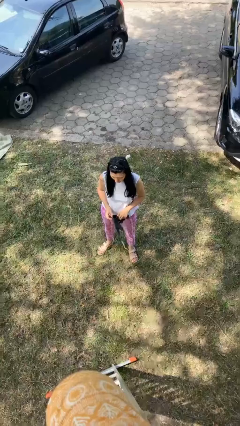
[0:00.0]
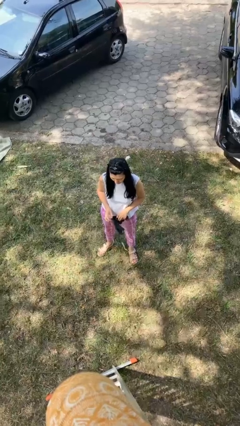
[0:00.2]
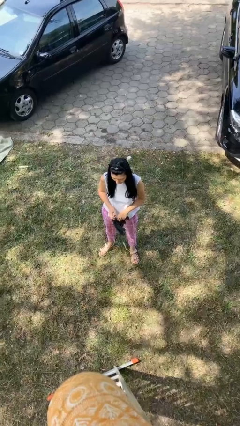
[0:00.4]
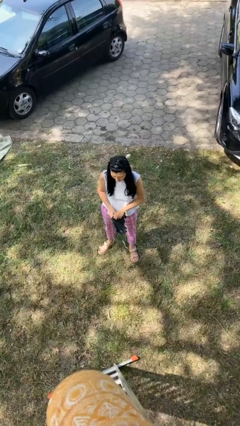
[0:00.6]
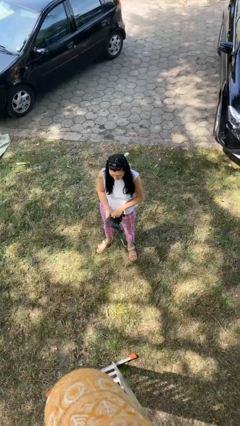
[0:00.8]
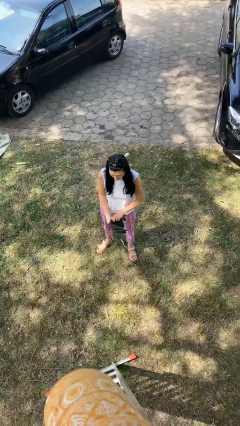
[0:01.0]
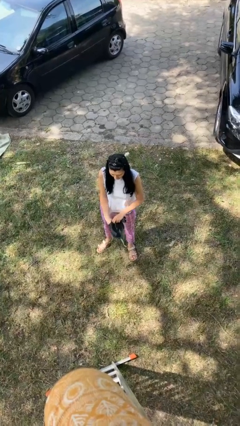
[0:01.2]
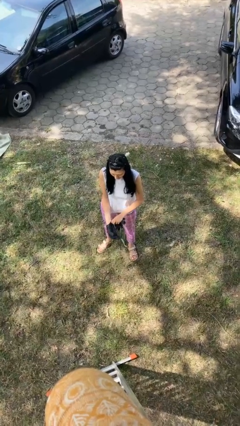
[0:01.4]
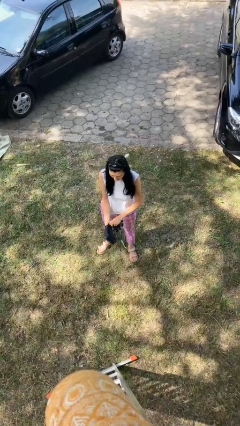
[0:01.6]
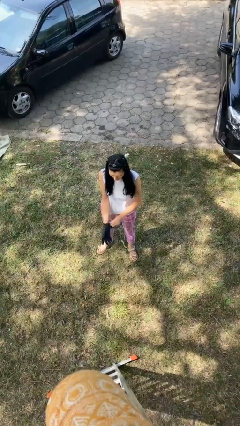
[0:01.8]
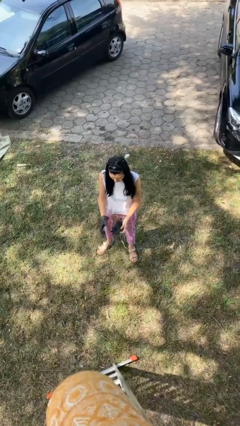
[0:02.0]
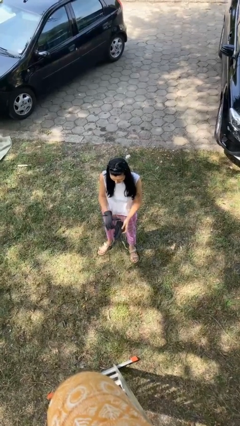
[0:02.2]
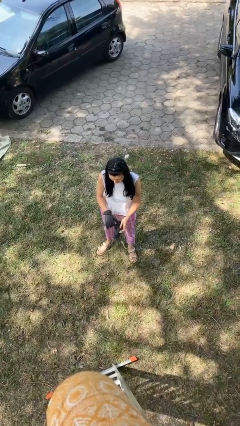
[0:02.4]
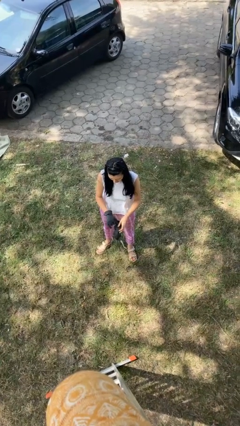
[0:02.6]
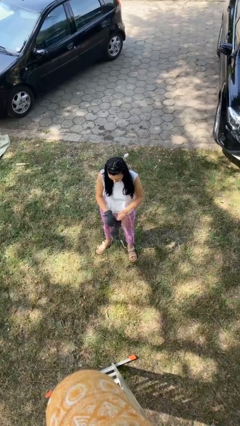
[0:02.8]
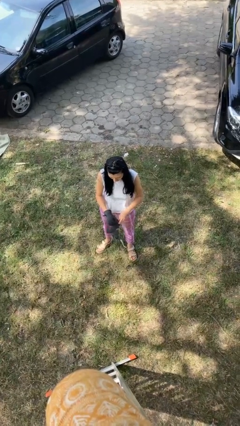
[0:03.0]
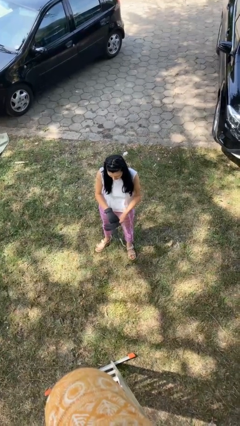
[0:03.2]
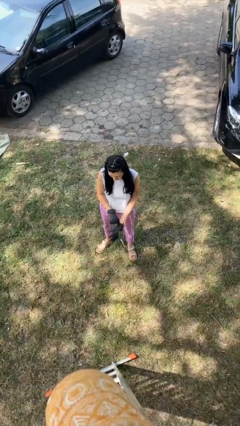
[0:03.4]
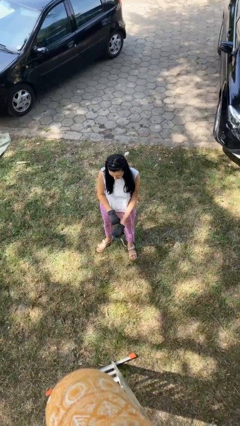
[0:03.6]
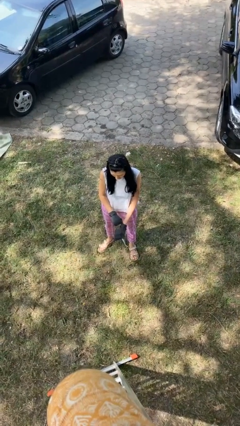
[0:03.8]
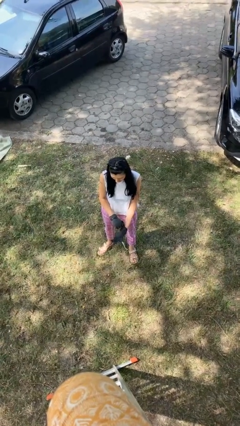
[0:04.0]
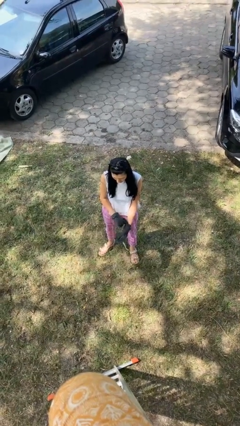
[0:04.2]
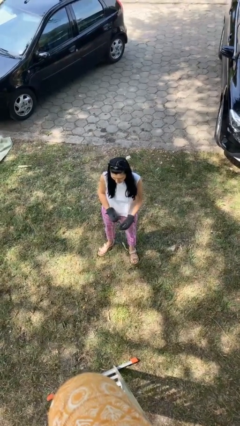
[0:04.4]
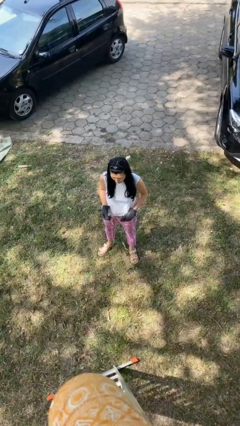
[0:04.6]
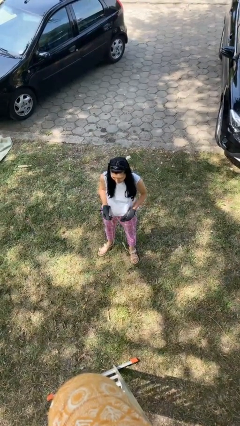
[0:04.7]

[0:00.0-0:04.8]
person puts on gloves

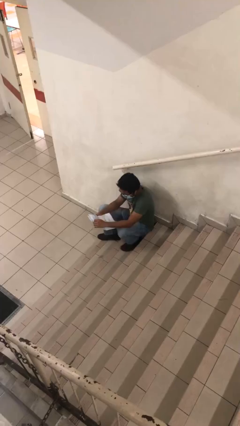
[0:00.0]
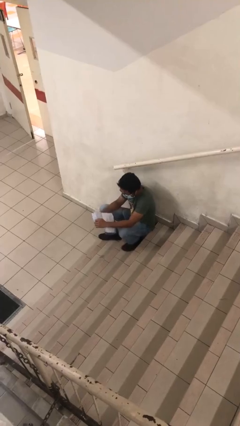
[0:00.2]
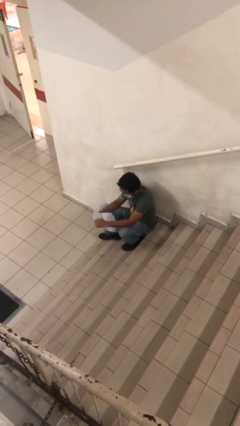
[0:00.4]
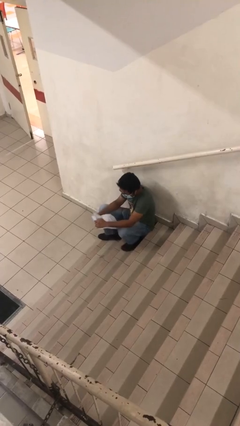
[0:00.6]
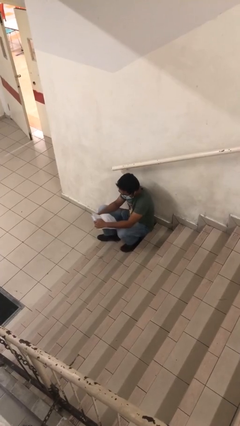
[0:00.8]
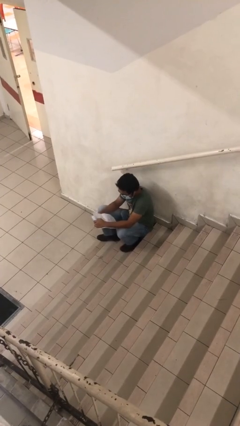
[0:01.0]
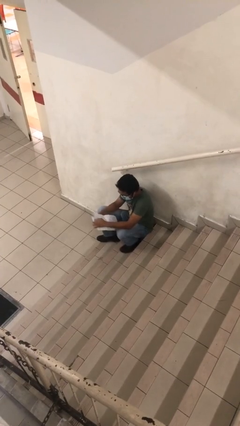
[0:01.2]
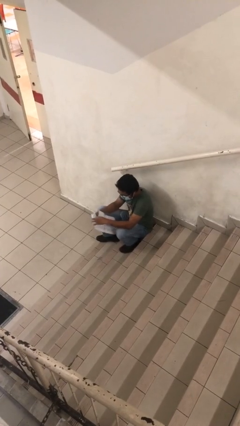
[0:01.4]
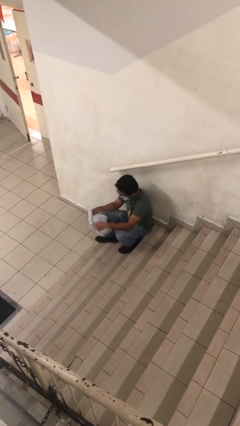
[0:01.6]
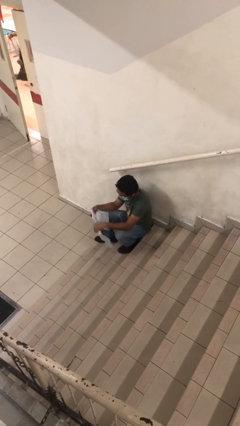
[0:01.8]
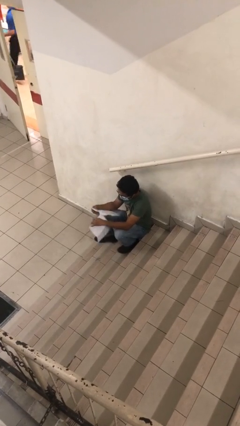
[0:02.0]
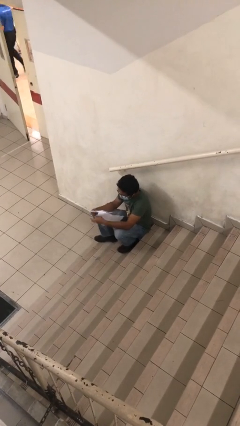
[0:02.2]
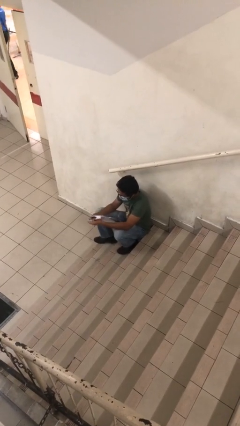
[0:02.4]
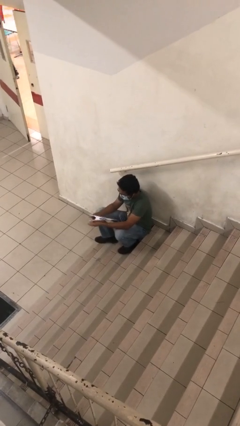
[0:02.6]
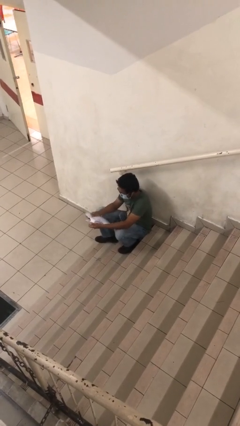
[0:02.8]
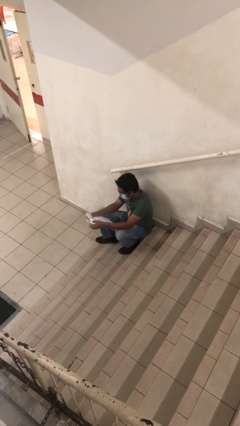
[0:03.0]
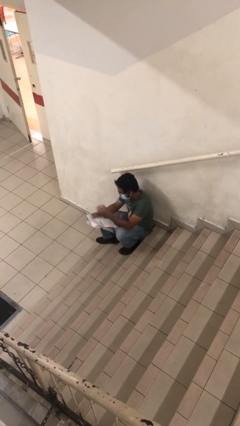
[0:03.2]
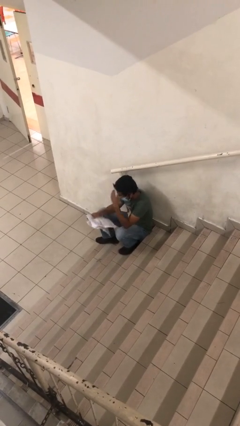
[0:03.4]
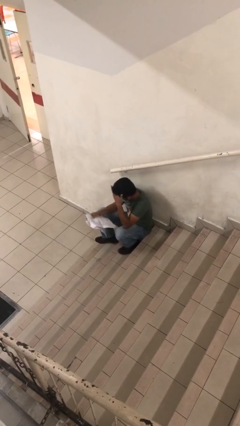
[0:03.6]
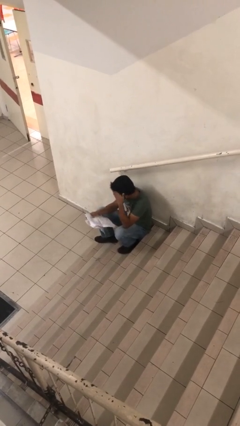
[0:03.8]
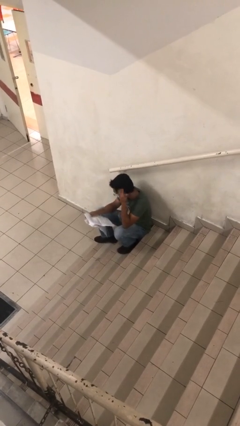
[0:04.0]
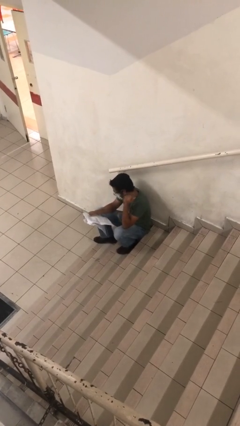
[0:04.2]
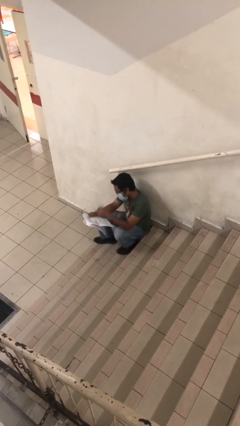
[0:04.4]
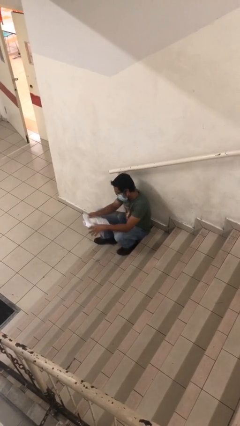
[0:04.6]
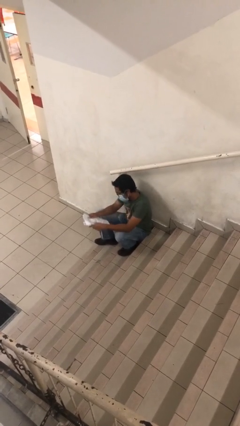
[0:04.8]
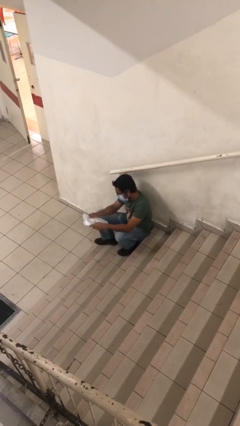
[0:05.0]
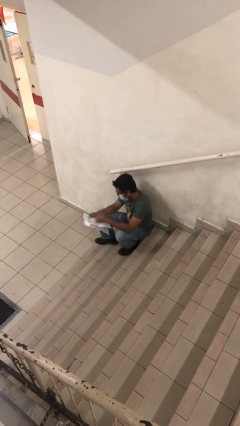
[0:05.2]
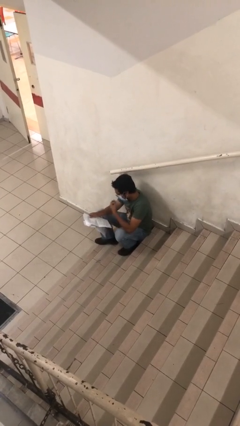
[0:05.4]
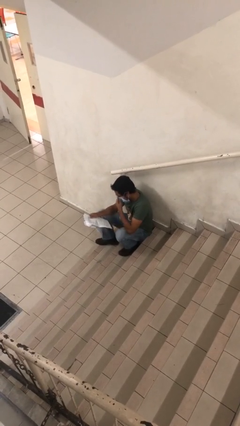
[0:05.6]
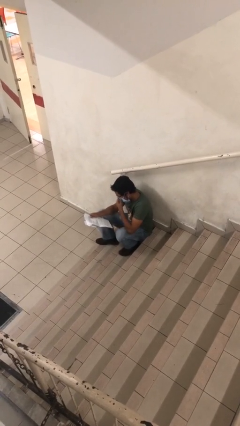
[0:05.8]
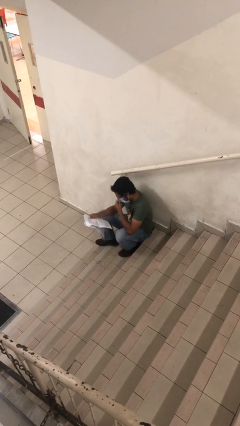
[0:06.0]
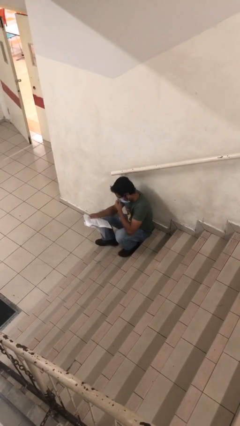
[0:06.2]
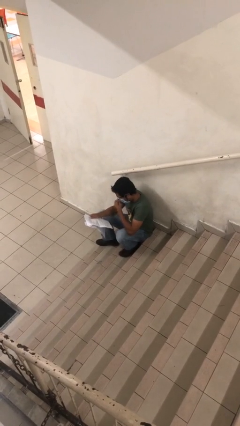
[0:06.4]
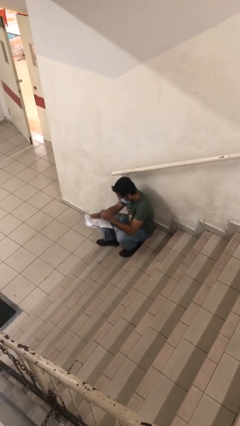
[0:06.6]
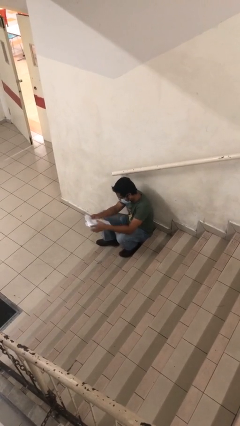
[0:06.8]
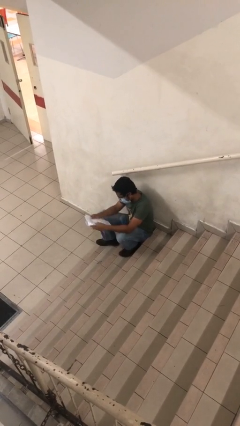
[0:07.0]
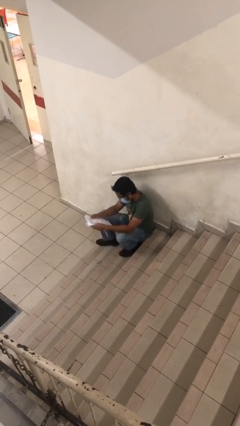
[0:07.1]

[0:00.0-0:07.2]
person reads document

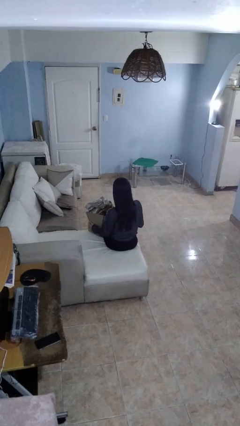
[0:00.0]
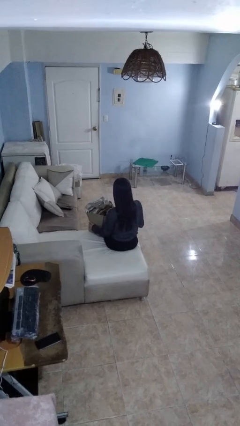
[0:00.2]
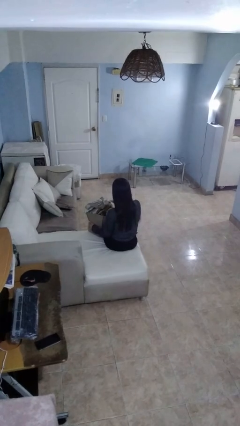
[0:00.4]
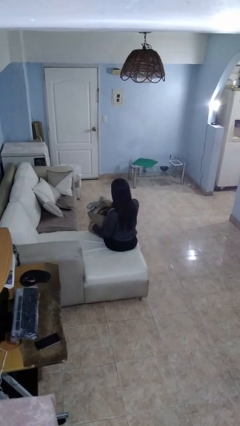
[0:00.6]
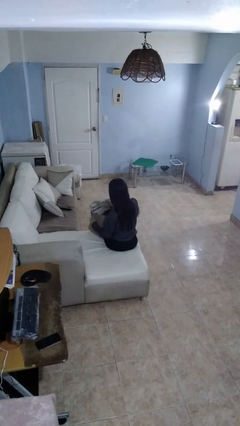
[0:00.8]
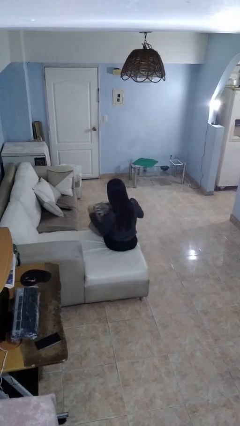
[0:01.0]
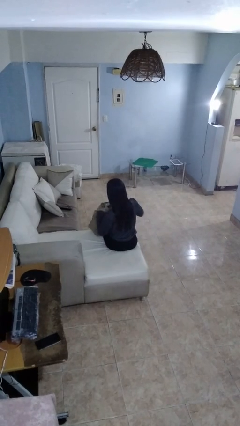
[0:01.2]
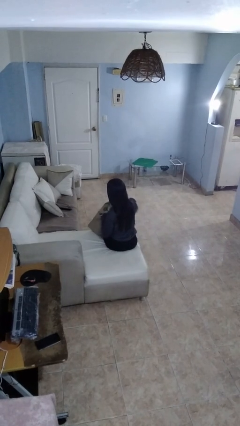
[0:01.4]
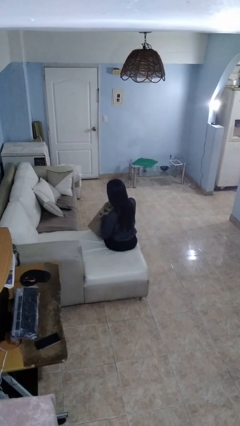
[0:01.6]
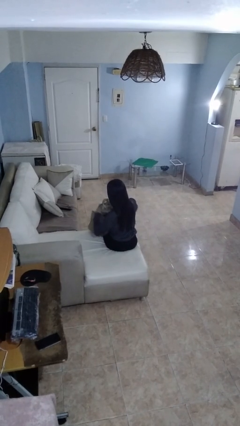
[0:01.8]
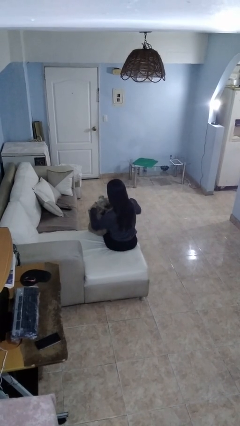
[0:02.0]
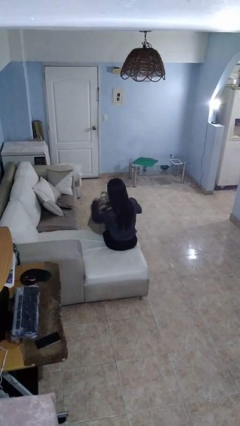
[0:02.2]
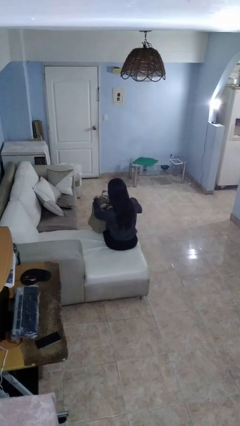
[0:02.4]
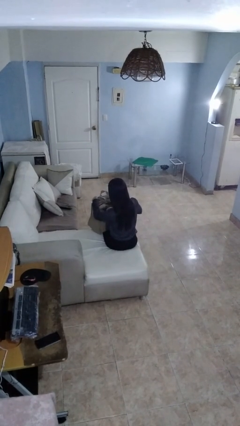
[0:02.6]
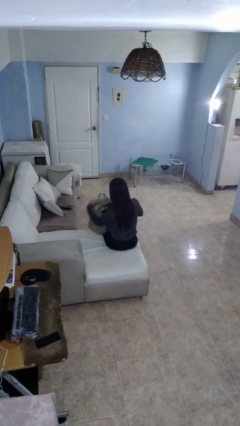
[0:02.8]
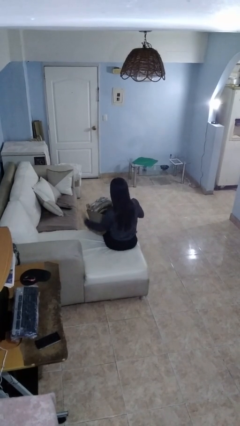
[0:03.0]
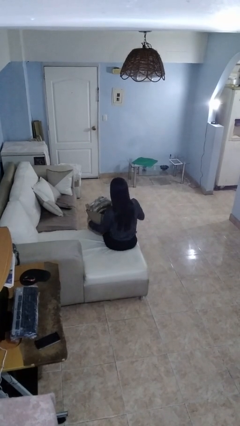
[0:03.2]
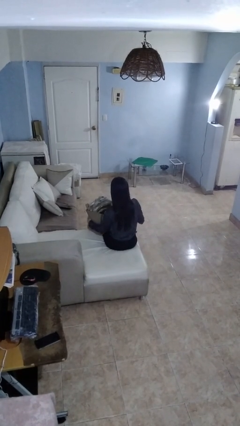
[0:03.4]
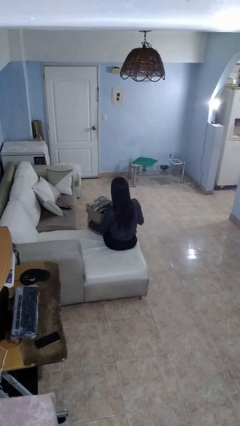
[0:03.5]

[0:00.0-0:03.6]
person searches in bag

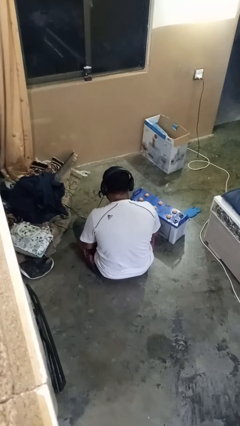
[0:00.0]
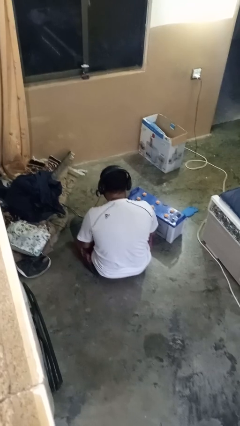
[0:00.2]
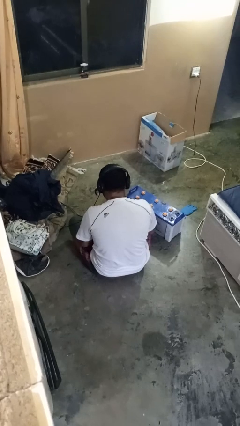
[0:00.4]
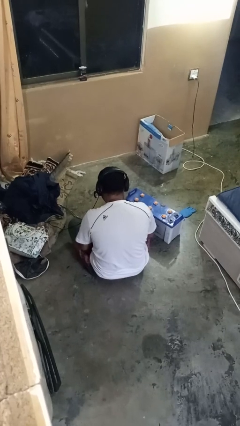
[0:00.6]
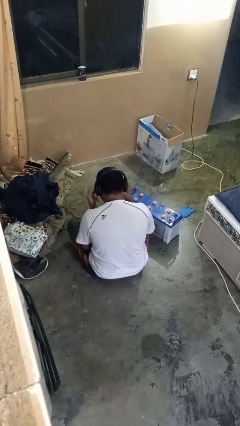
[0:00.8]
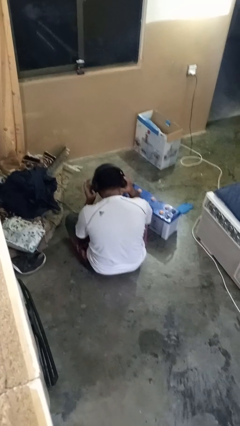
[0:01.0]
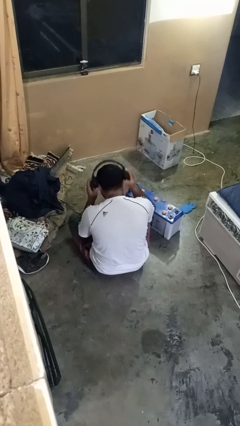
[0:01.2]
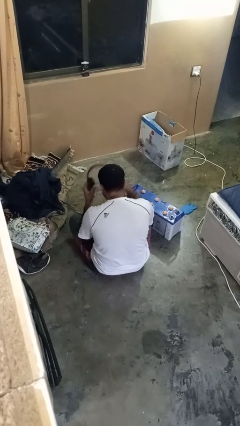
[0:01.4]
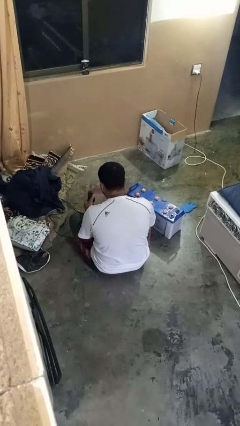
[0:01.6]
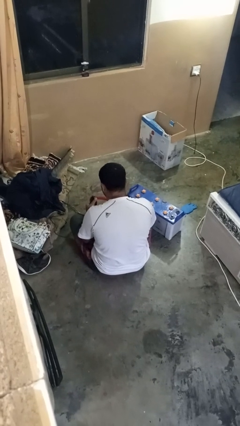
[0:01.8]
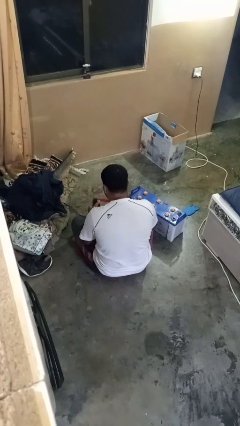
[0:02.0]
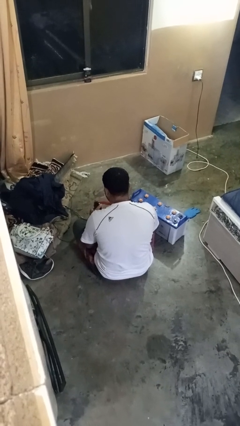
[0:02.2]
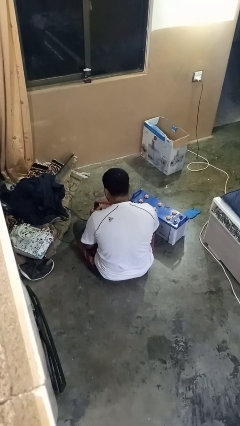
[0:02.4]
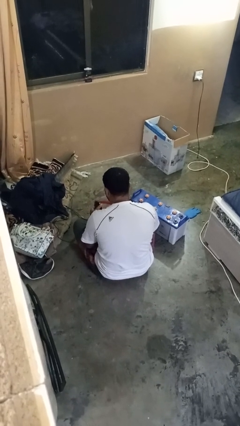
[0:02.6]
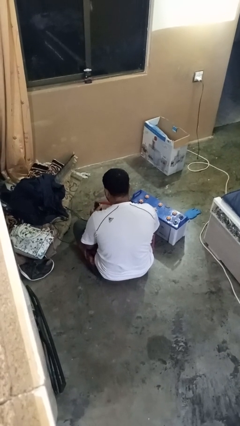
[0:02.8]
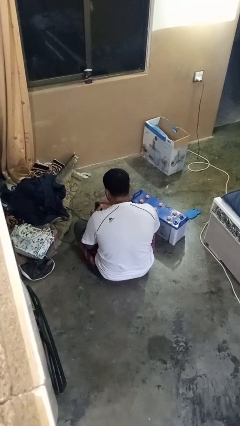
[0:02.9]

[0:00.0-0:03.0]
person takes off headphones
